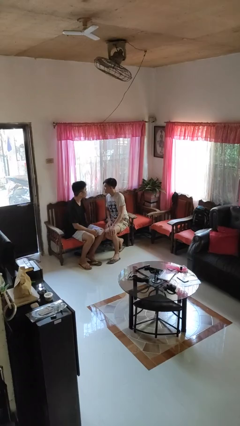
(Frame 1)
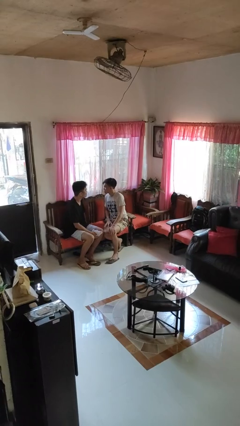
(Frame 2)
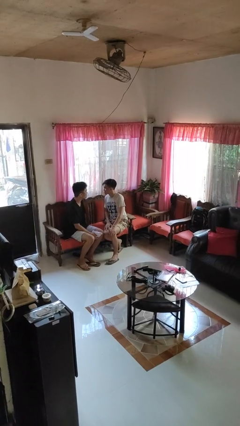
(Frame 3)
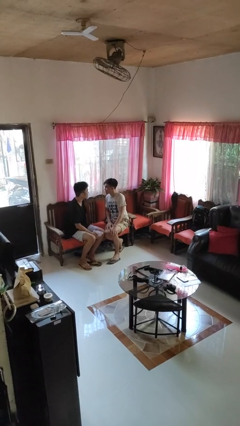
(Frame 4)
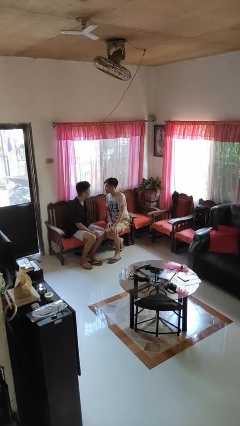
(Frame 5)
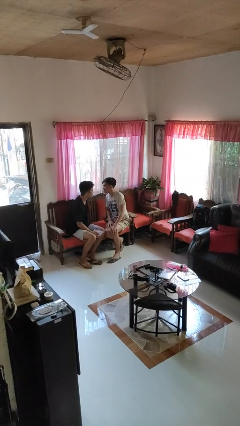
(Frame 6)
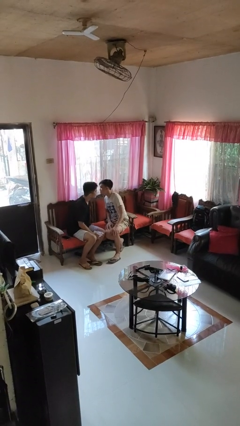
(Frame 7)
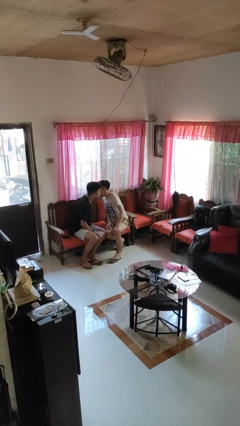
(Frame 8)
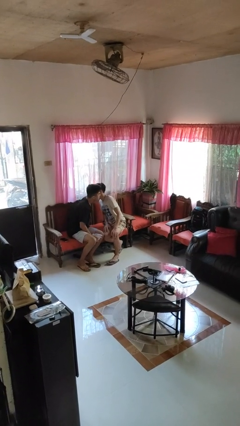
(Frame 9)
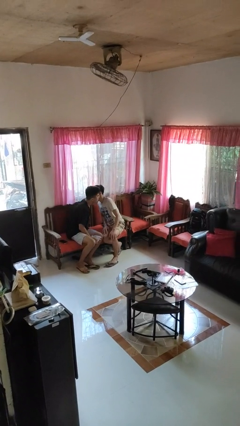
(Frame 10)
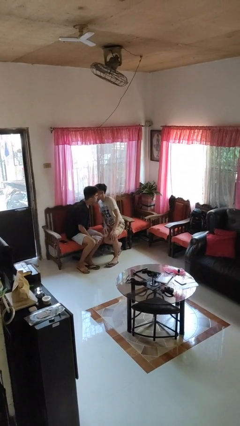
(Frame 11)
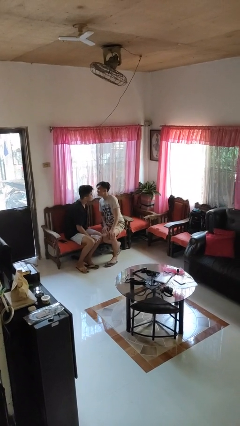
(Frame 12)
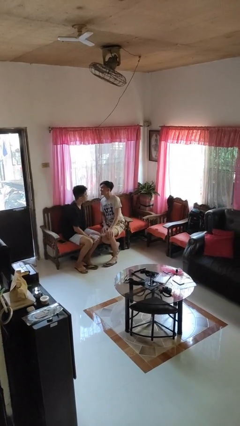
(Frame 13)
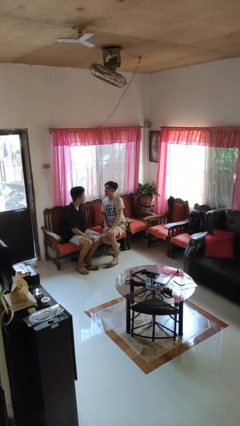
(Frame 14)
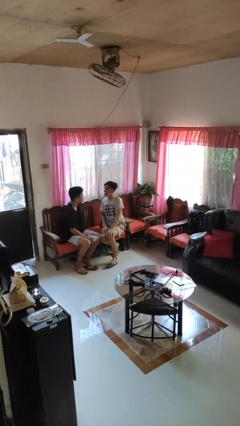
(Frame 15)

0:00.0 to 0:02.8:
person kisses cheek of person

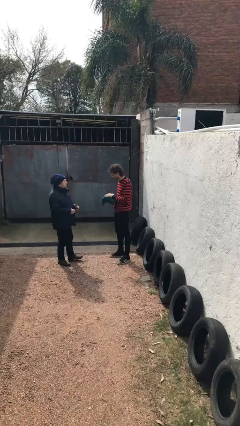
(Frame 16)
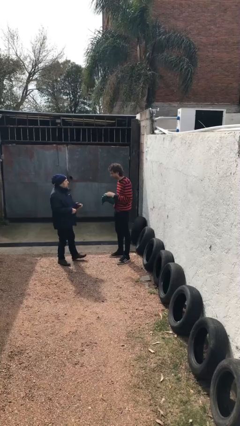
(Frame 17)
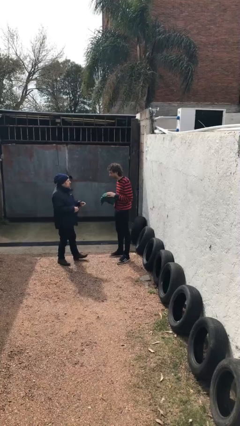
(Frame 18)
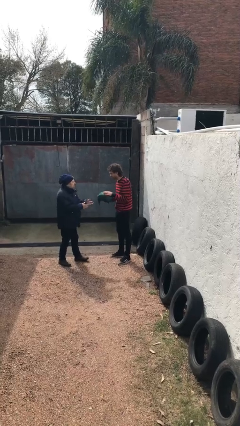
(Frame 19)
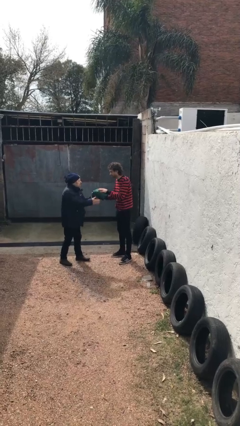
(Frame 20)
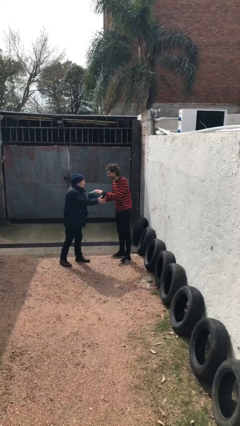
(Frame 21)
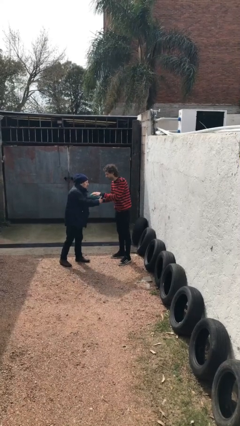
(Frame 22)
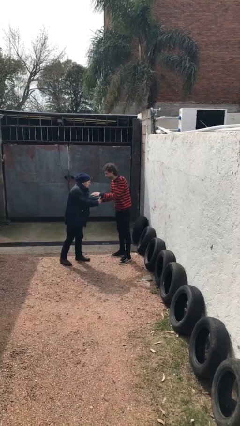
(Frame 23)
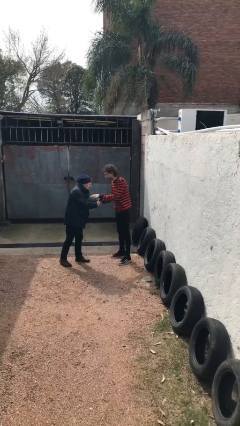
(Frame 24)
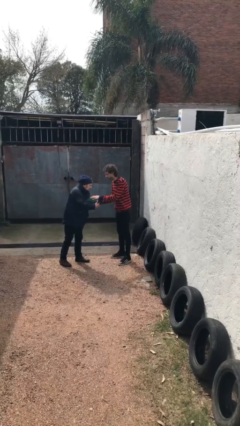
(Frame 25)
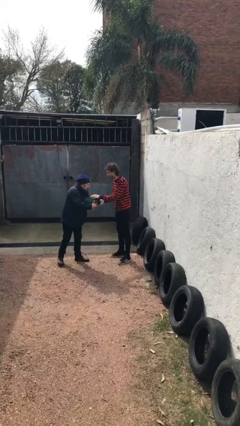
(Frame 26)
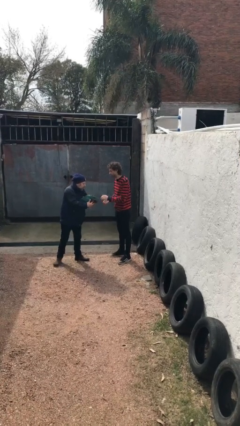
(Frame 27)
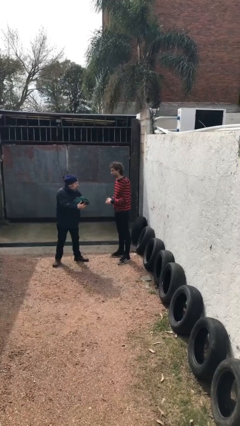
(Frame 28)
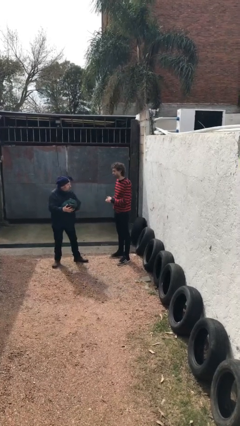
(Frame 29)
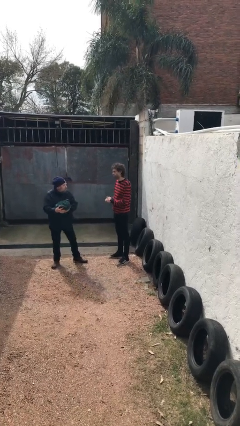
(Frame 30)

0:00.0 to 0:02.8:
person transfers object to person

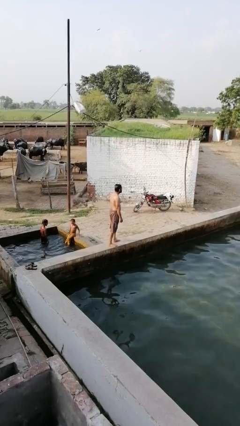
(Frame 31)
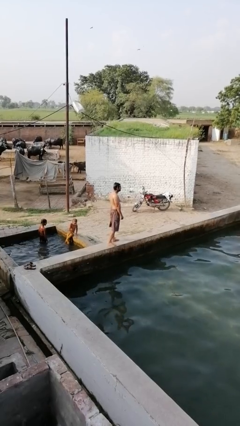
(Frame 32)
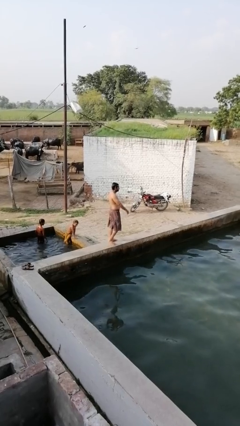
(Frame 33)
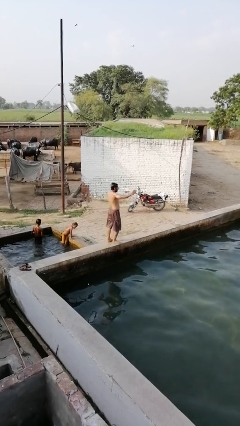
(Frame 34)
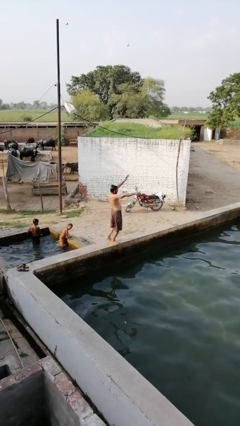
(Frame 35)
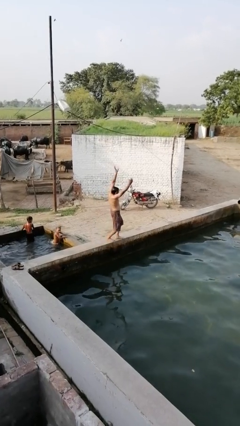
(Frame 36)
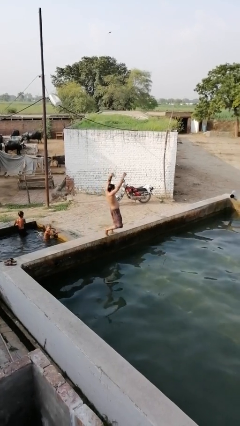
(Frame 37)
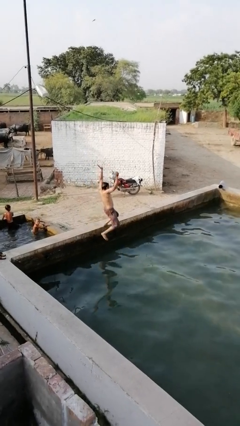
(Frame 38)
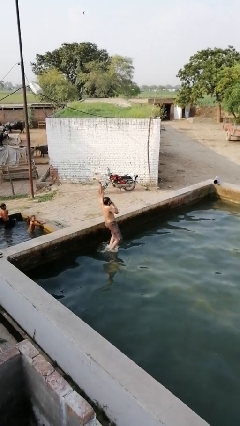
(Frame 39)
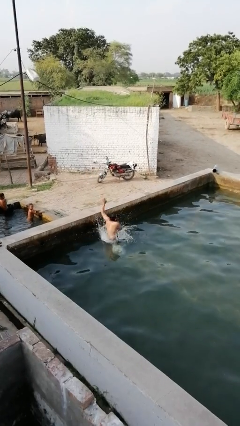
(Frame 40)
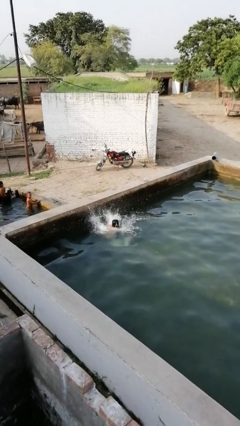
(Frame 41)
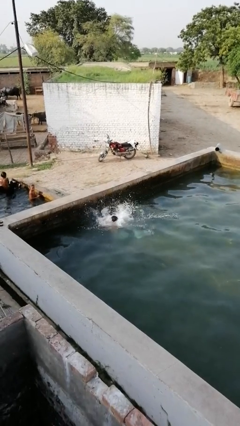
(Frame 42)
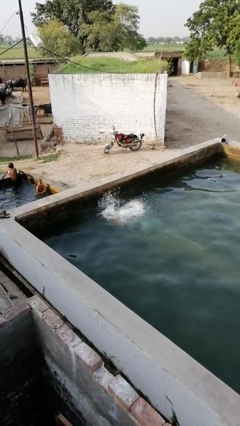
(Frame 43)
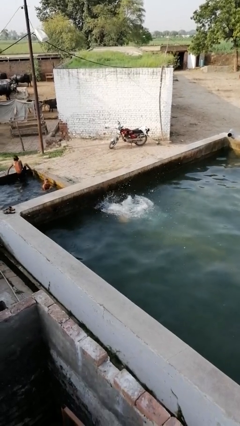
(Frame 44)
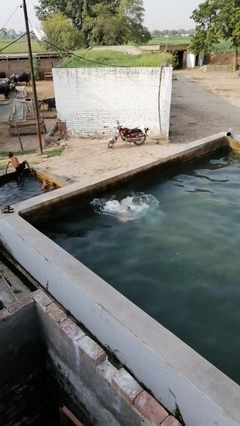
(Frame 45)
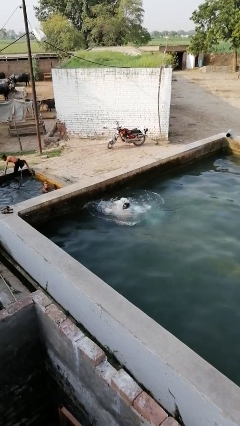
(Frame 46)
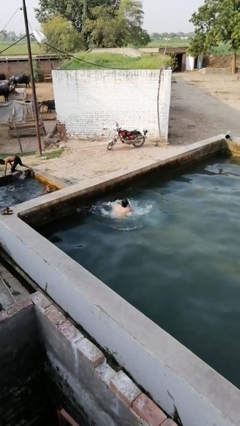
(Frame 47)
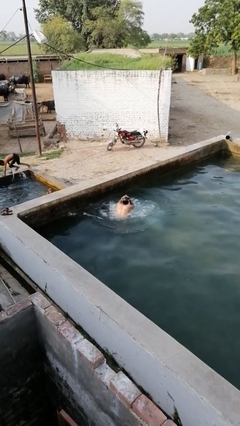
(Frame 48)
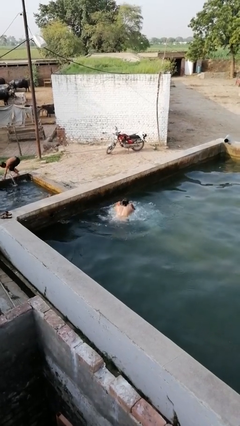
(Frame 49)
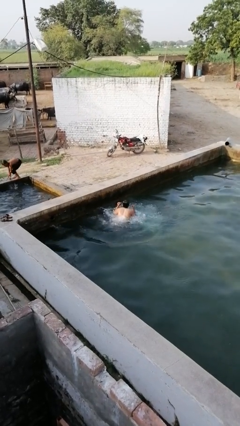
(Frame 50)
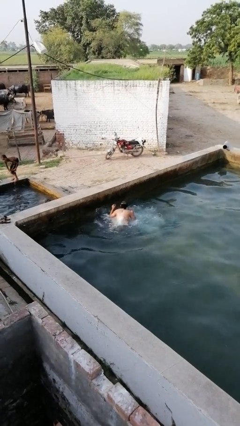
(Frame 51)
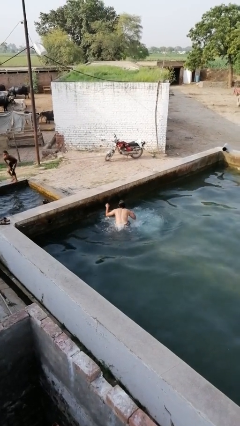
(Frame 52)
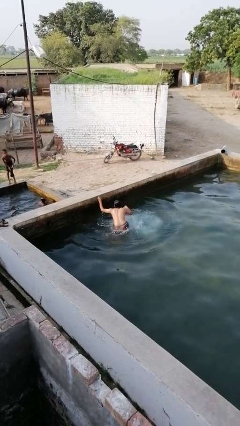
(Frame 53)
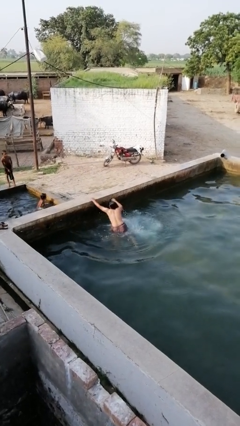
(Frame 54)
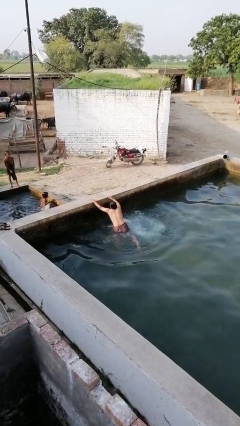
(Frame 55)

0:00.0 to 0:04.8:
person falls into pool

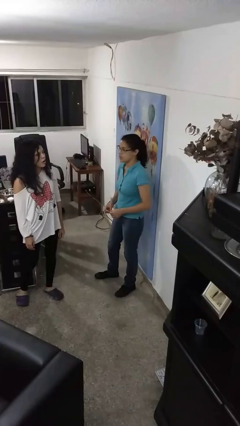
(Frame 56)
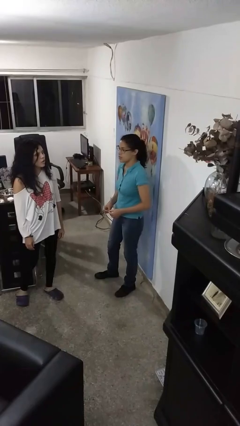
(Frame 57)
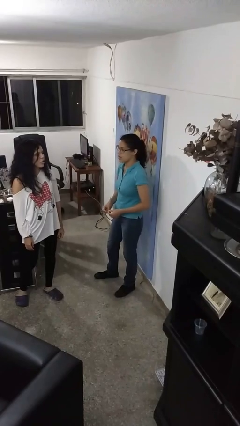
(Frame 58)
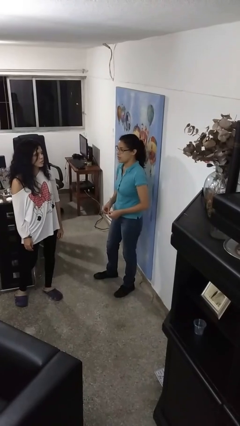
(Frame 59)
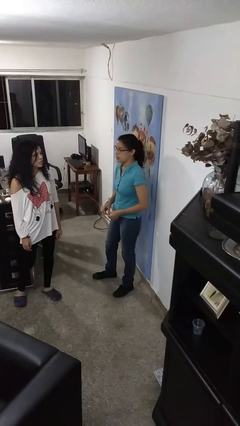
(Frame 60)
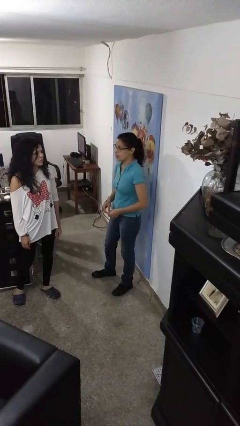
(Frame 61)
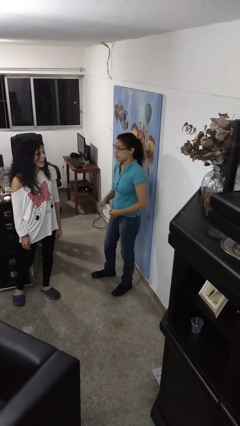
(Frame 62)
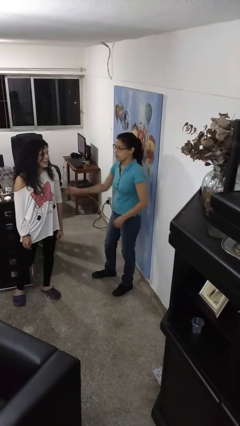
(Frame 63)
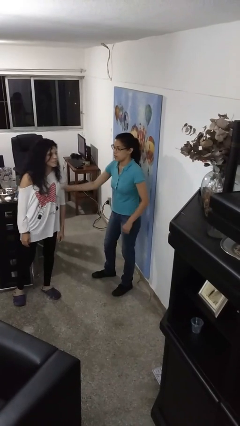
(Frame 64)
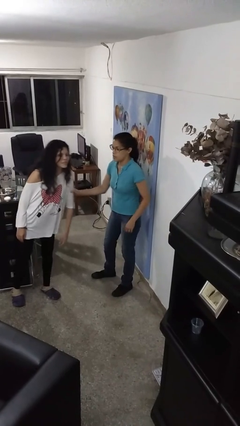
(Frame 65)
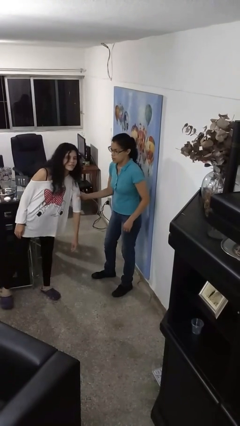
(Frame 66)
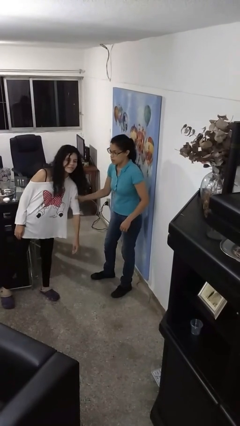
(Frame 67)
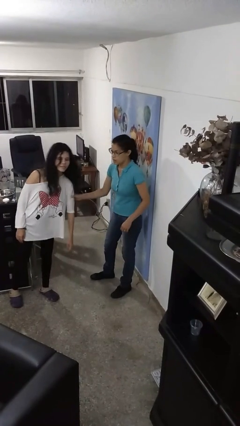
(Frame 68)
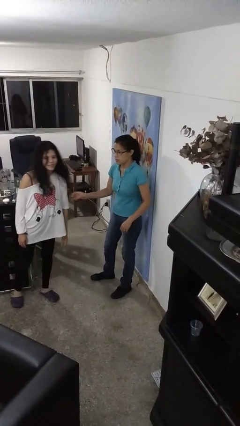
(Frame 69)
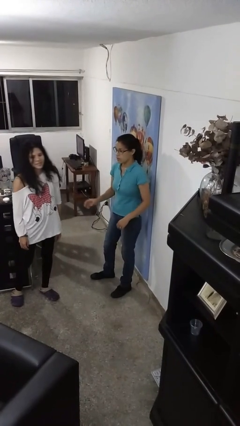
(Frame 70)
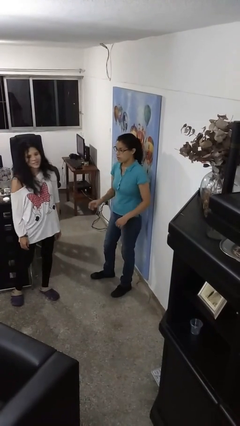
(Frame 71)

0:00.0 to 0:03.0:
person grabs person by bicep

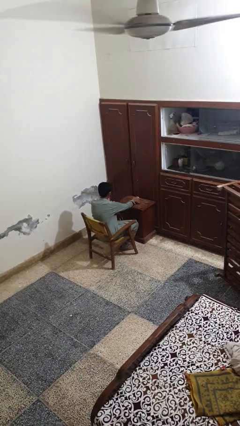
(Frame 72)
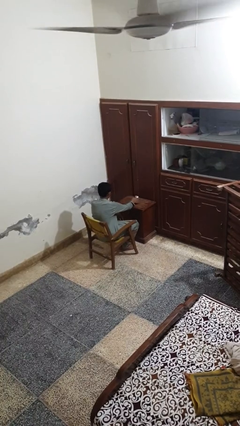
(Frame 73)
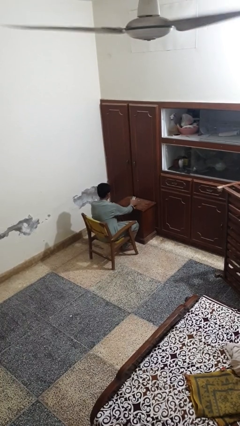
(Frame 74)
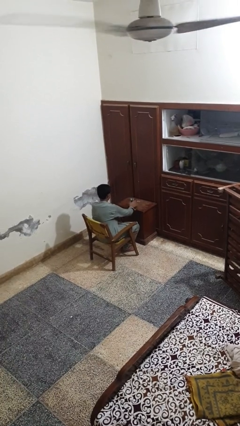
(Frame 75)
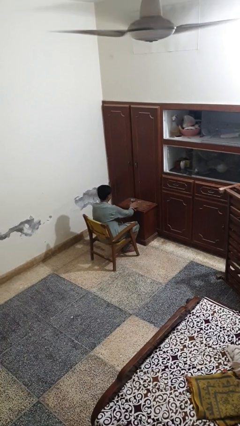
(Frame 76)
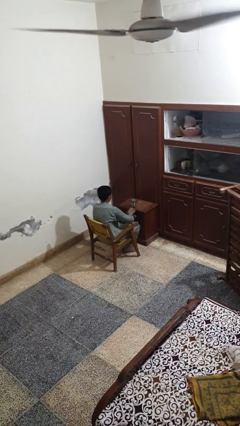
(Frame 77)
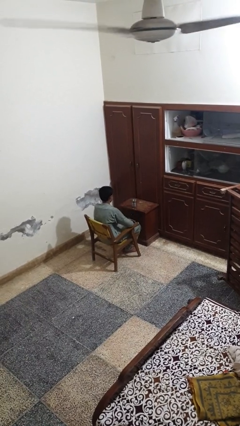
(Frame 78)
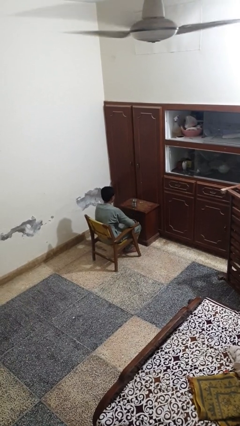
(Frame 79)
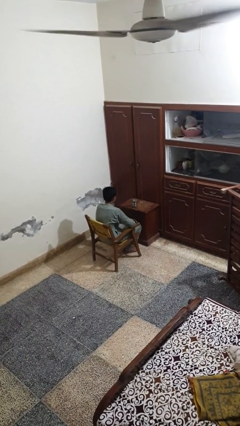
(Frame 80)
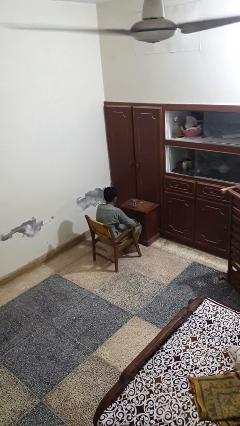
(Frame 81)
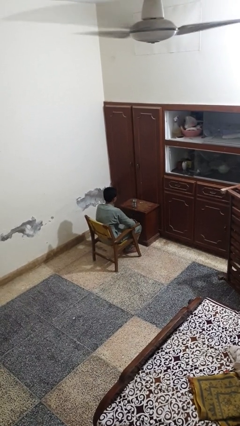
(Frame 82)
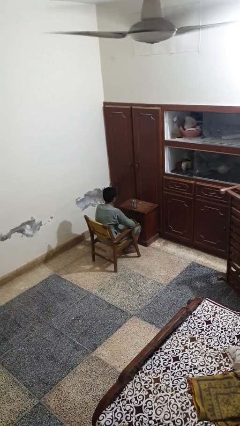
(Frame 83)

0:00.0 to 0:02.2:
person sets upright glass

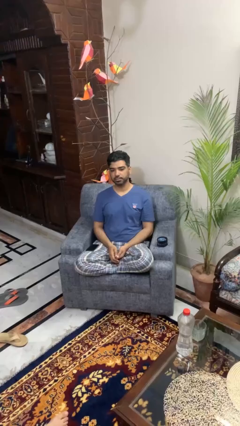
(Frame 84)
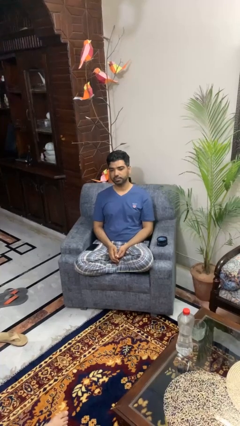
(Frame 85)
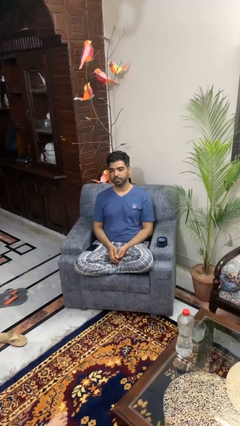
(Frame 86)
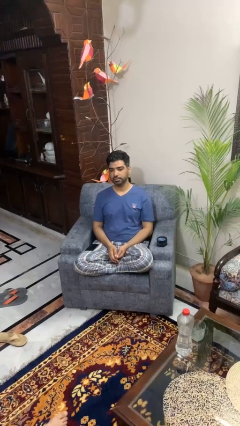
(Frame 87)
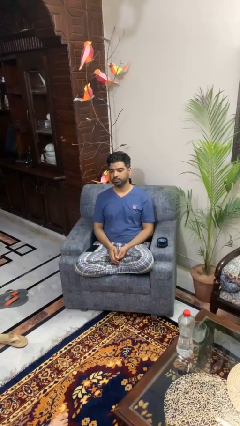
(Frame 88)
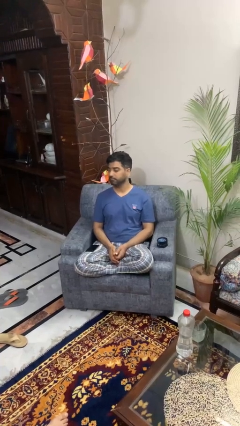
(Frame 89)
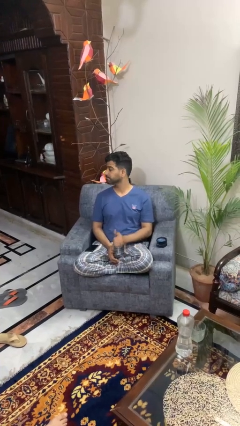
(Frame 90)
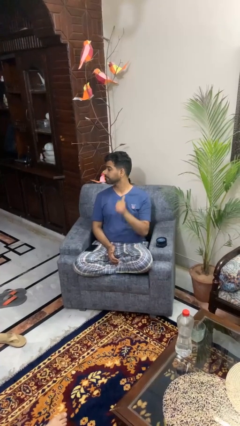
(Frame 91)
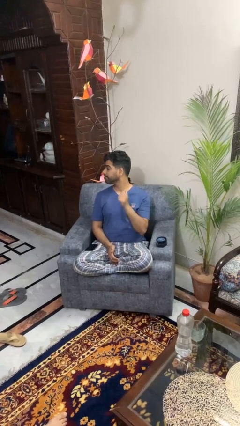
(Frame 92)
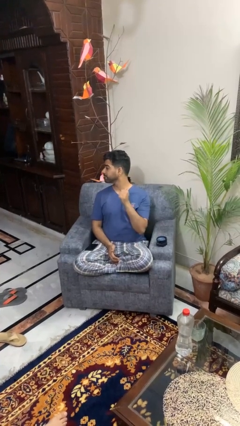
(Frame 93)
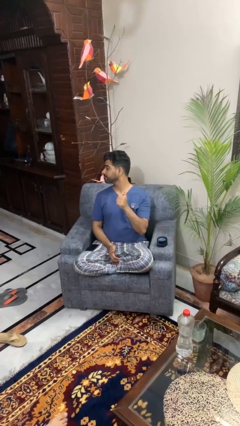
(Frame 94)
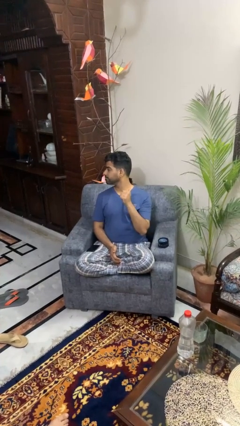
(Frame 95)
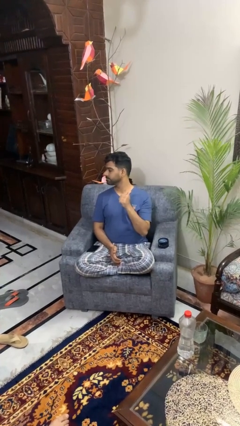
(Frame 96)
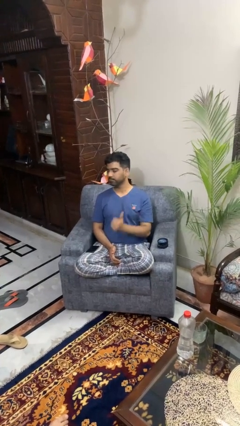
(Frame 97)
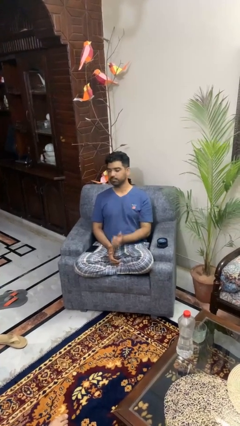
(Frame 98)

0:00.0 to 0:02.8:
person gestures behind me
